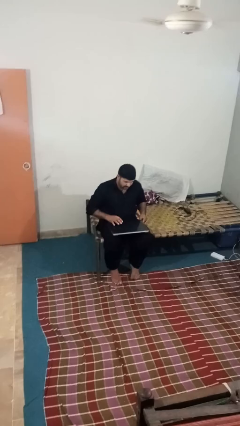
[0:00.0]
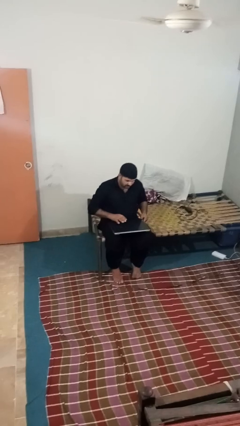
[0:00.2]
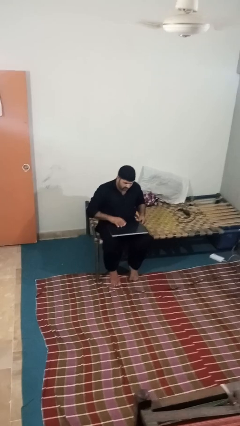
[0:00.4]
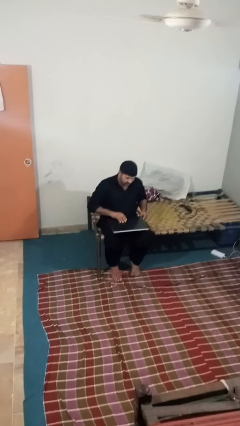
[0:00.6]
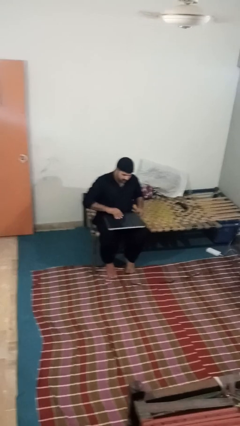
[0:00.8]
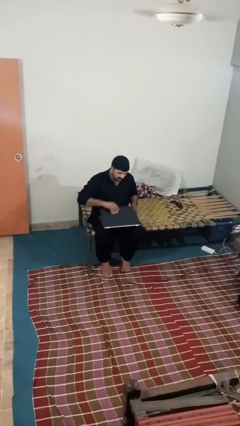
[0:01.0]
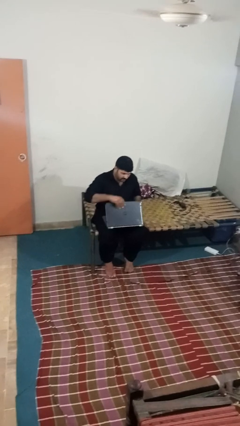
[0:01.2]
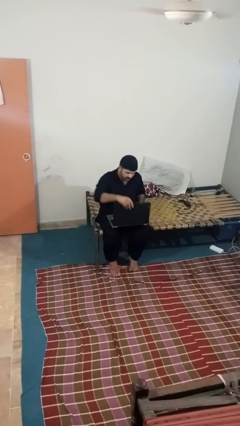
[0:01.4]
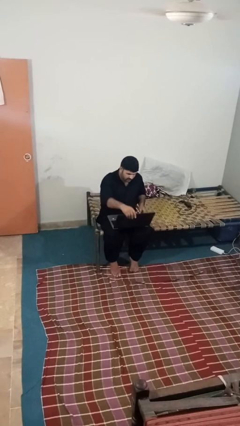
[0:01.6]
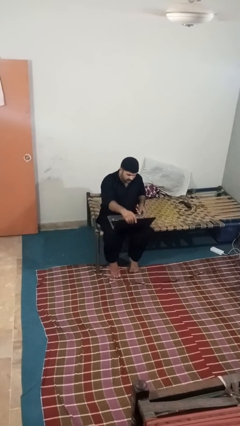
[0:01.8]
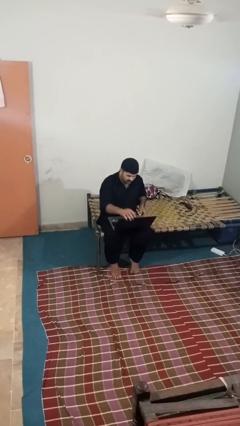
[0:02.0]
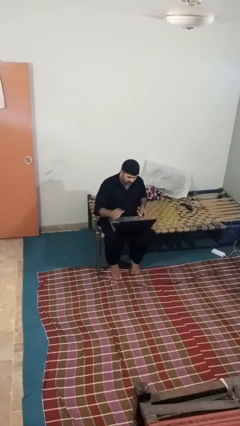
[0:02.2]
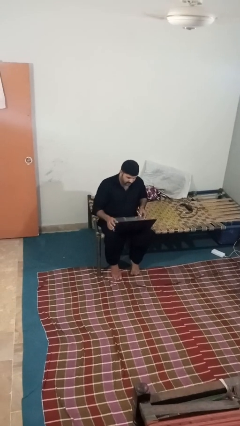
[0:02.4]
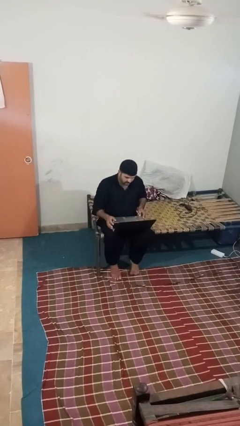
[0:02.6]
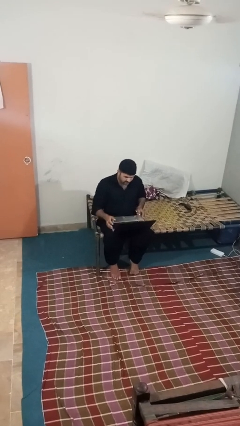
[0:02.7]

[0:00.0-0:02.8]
person opens laptop

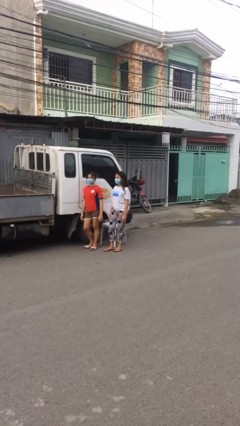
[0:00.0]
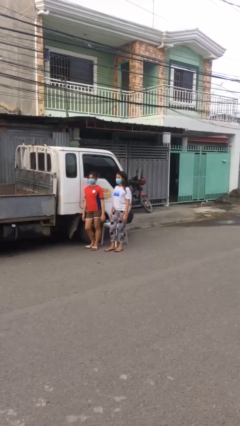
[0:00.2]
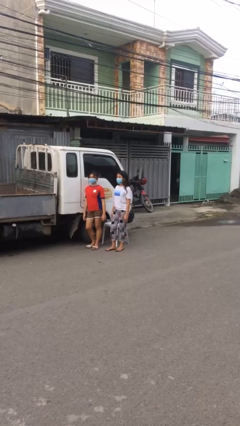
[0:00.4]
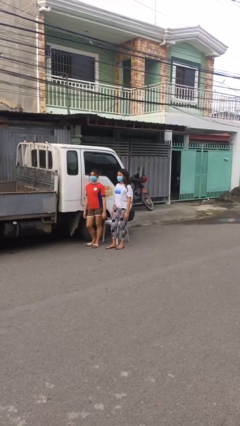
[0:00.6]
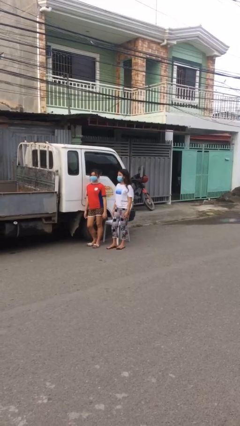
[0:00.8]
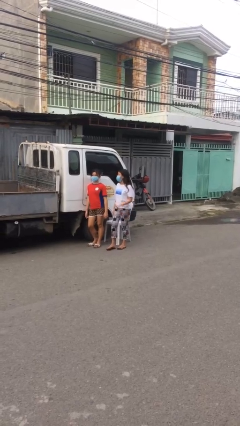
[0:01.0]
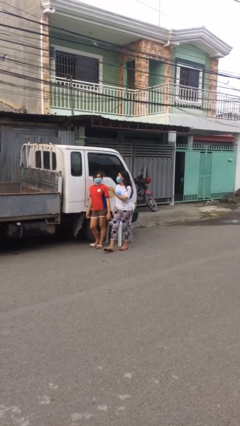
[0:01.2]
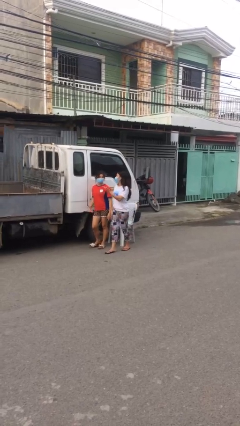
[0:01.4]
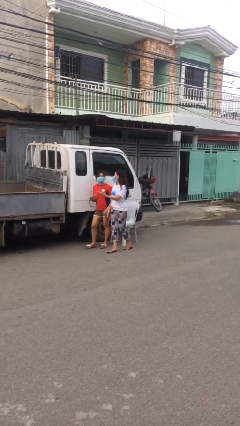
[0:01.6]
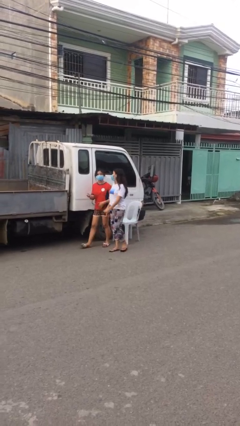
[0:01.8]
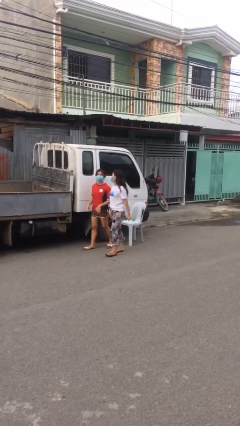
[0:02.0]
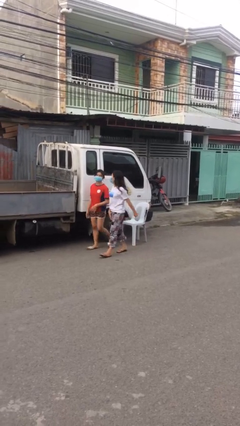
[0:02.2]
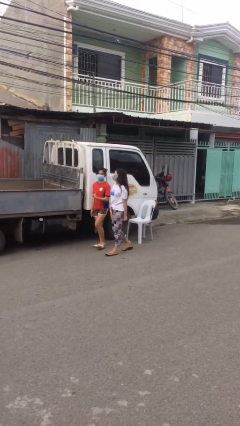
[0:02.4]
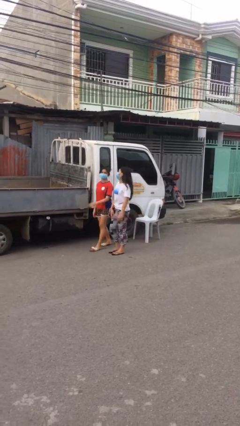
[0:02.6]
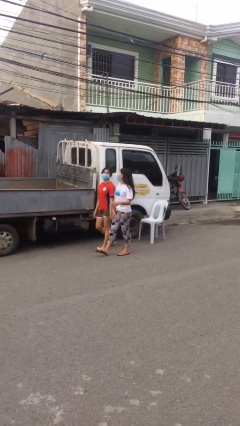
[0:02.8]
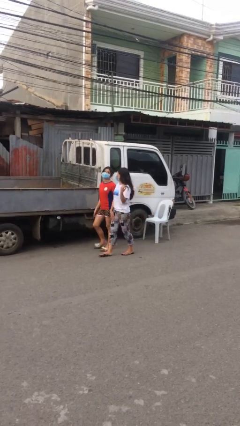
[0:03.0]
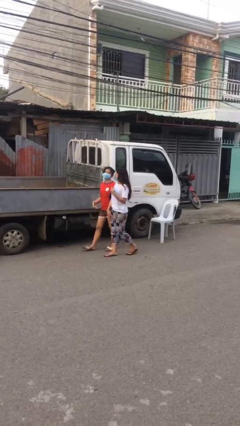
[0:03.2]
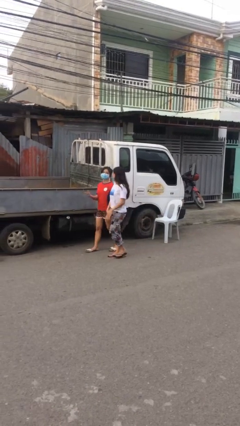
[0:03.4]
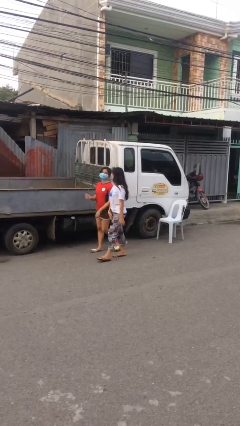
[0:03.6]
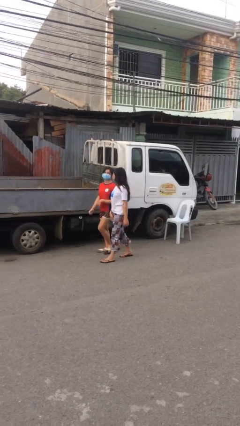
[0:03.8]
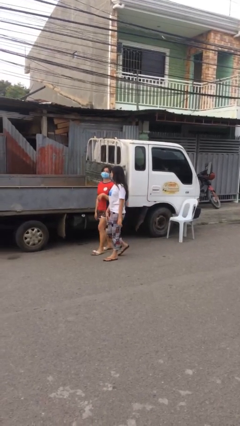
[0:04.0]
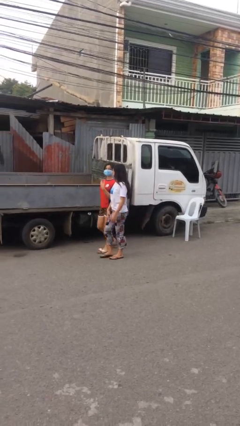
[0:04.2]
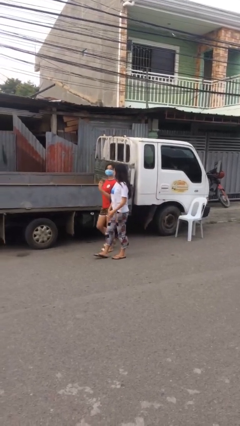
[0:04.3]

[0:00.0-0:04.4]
person talks to person

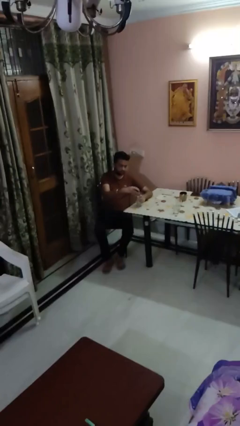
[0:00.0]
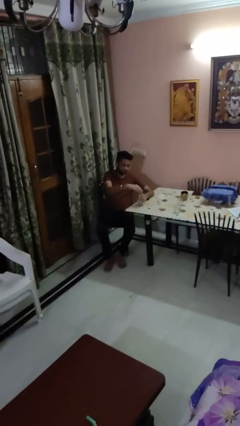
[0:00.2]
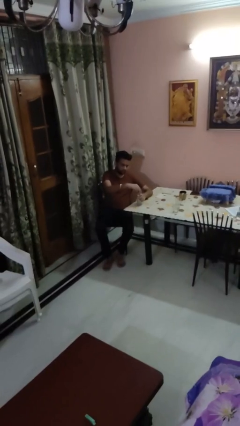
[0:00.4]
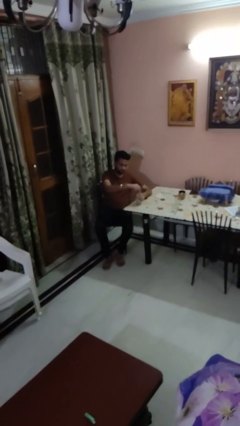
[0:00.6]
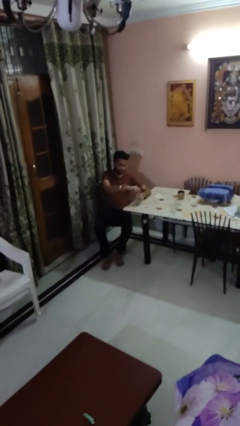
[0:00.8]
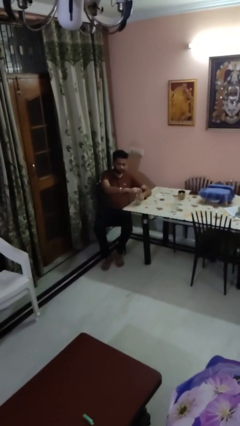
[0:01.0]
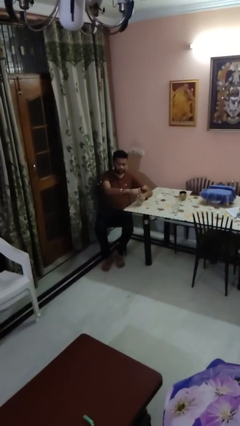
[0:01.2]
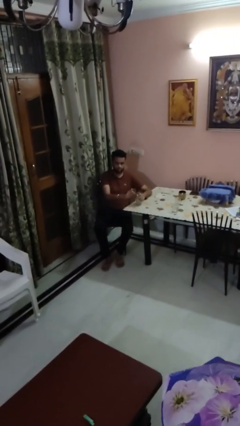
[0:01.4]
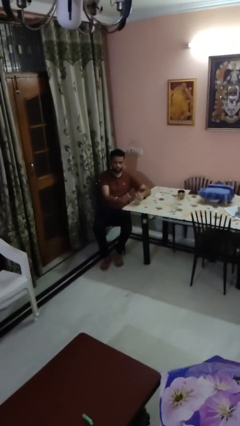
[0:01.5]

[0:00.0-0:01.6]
person screws lid to bottle

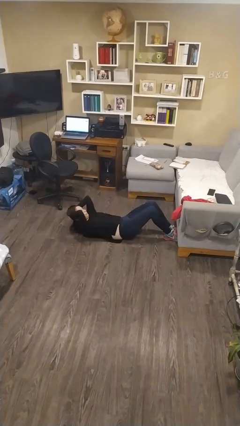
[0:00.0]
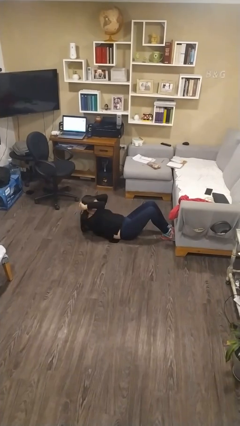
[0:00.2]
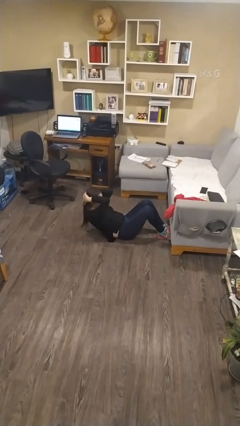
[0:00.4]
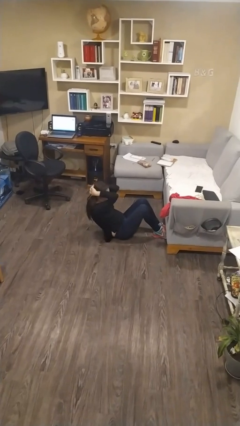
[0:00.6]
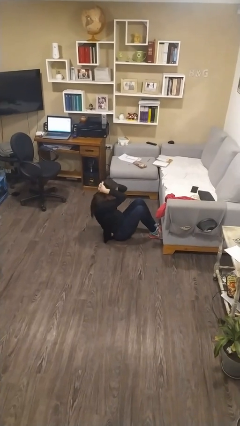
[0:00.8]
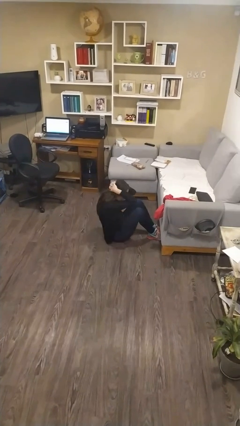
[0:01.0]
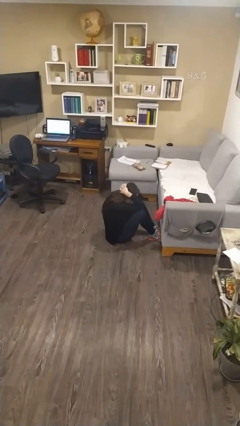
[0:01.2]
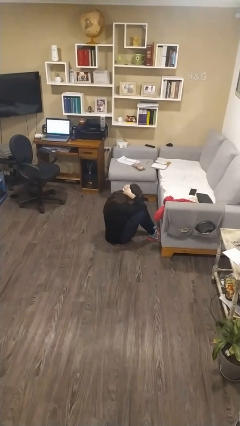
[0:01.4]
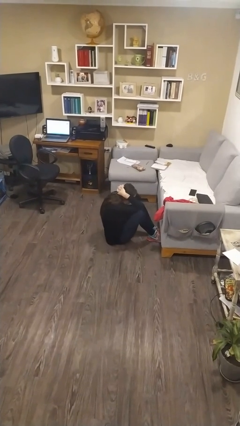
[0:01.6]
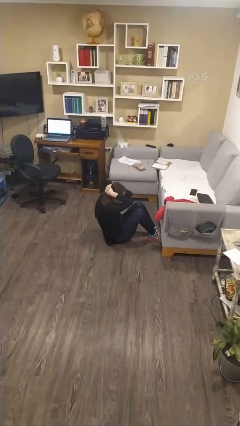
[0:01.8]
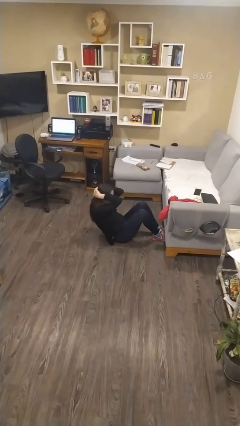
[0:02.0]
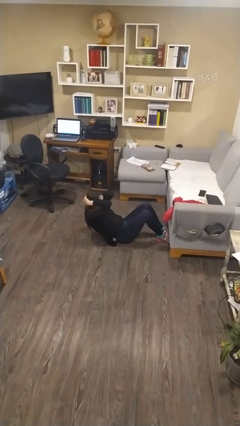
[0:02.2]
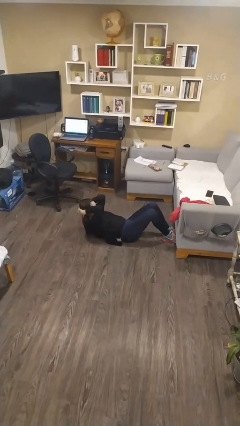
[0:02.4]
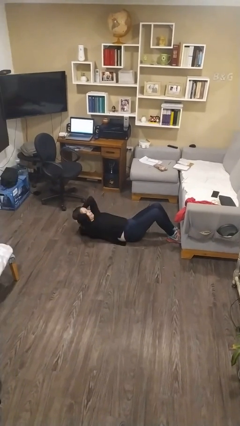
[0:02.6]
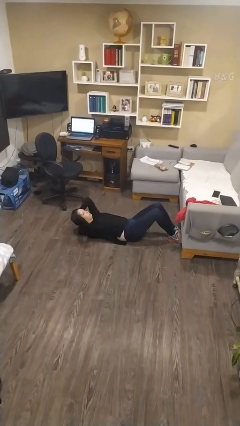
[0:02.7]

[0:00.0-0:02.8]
person exercises with situp

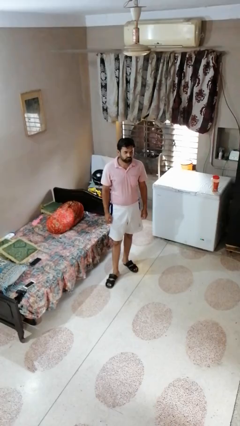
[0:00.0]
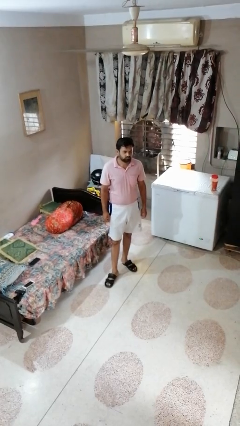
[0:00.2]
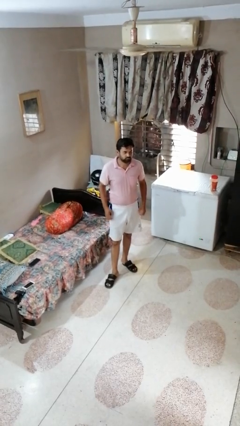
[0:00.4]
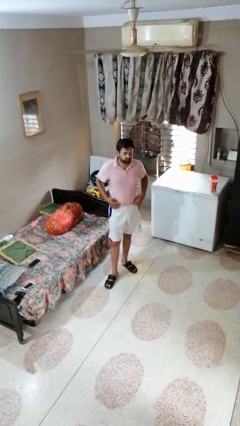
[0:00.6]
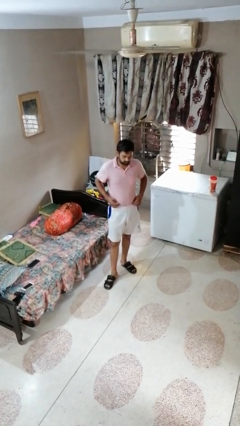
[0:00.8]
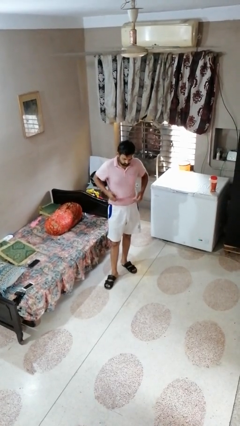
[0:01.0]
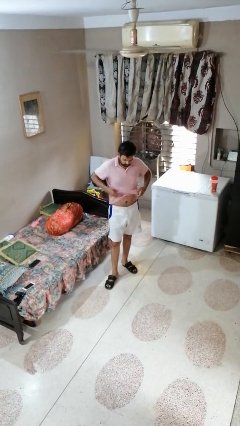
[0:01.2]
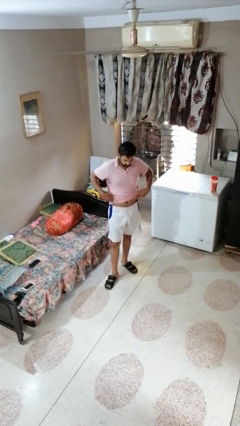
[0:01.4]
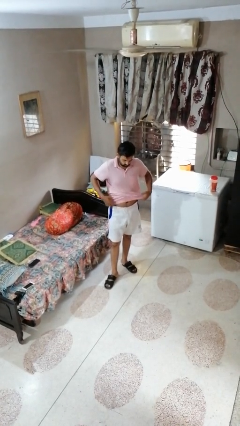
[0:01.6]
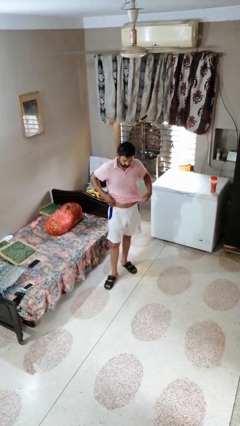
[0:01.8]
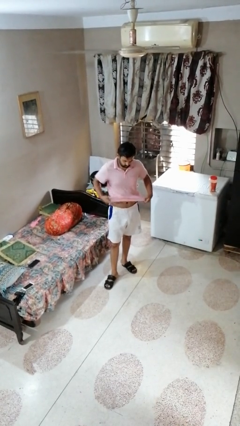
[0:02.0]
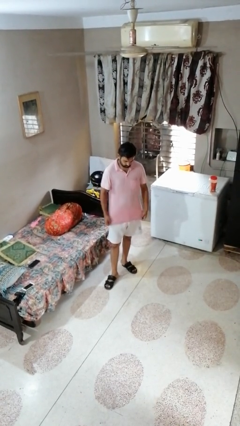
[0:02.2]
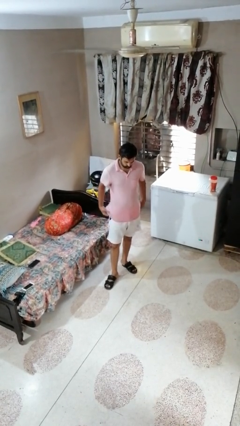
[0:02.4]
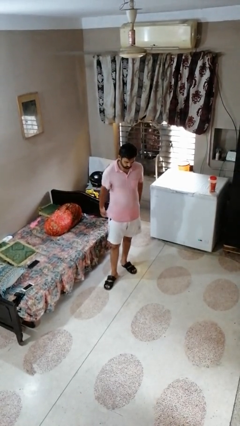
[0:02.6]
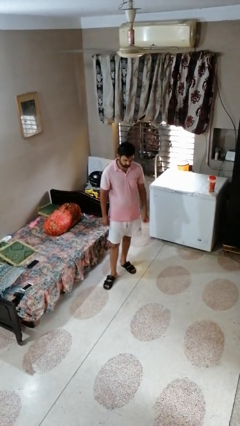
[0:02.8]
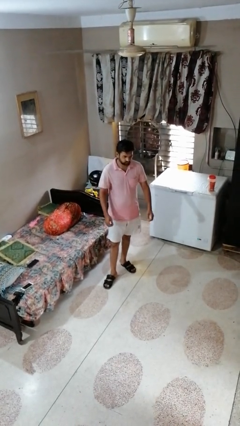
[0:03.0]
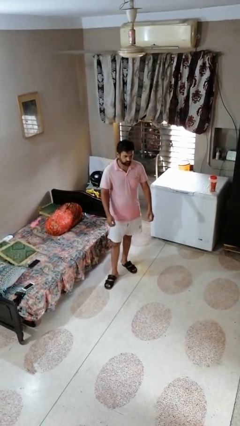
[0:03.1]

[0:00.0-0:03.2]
person untucks shirt

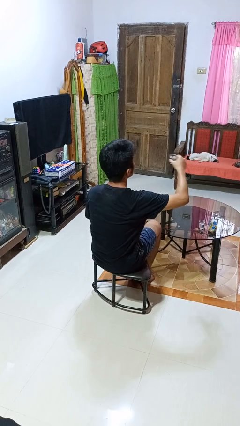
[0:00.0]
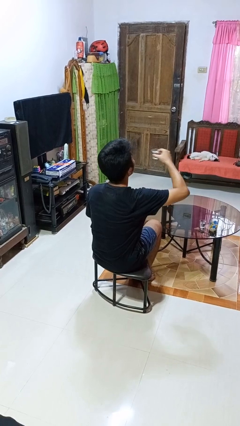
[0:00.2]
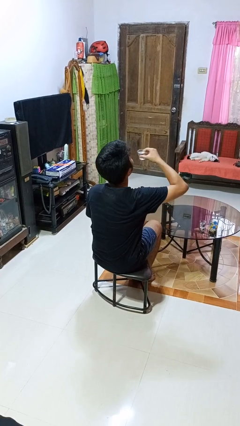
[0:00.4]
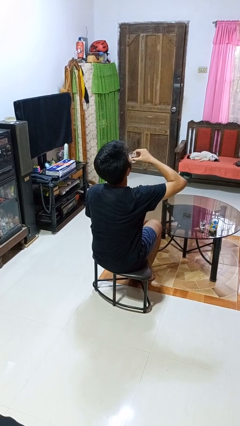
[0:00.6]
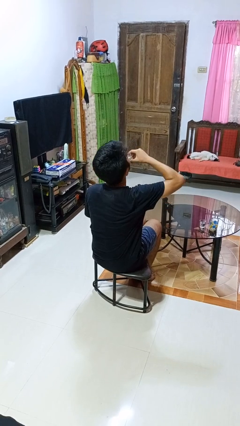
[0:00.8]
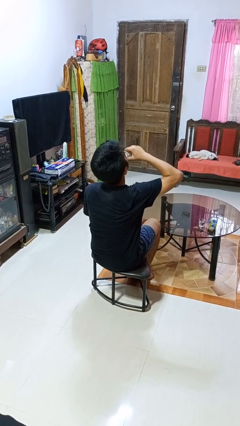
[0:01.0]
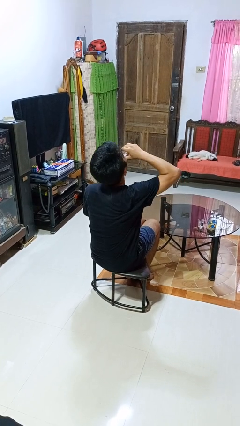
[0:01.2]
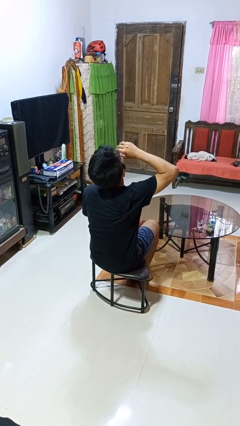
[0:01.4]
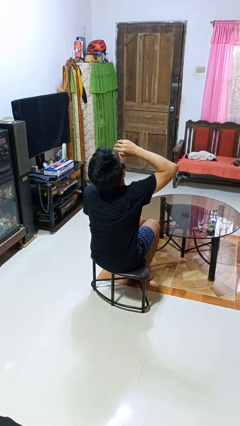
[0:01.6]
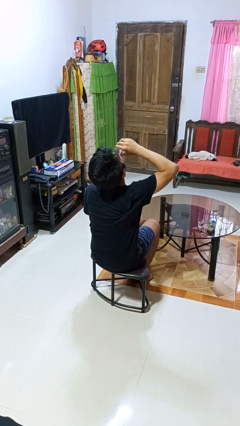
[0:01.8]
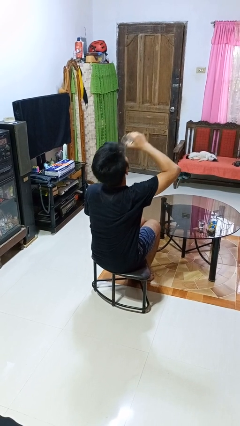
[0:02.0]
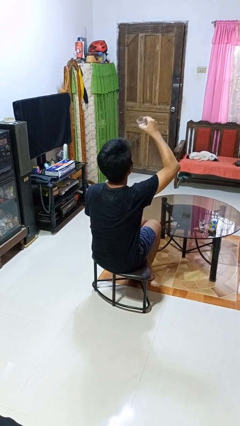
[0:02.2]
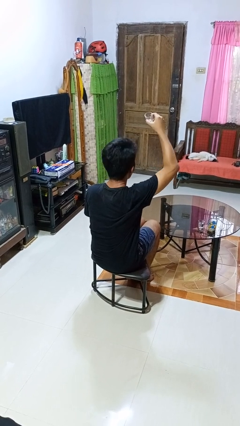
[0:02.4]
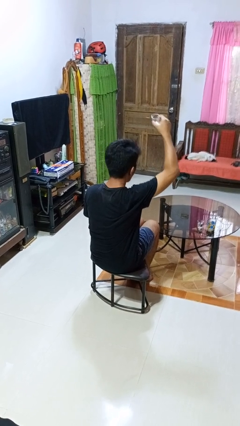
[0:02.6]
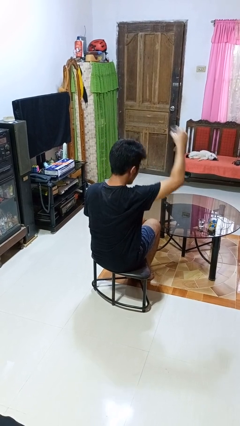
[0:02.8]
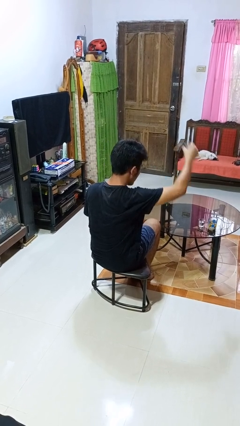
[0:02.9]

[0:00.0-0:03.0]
person drinks from shotglass
